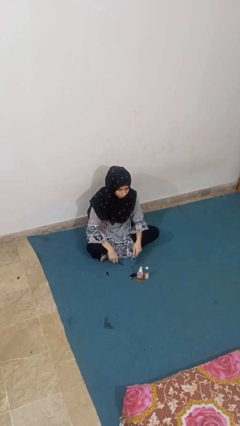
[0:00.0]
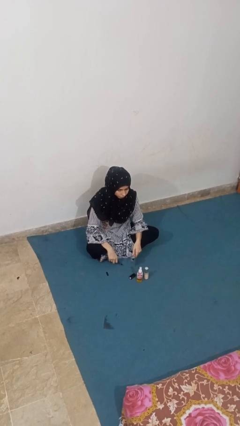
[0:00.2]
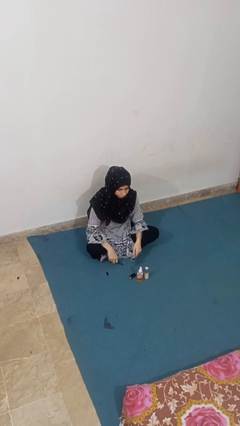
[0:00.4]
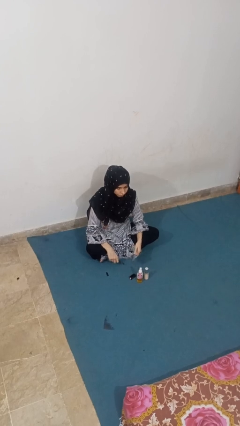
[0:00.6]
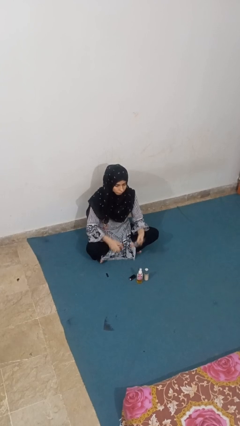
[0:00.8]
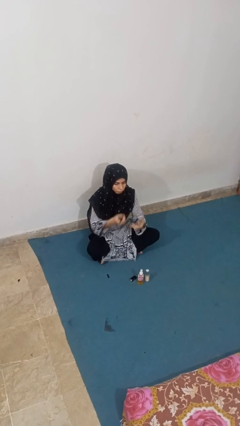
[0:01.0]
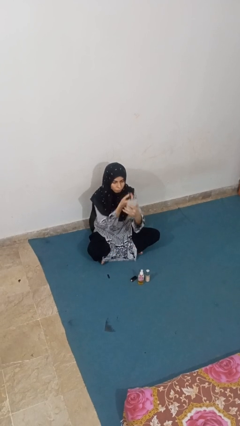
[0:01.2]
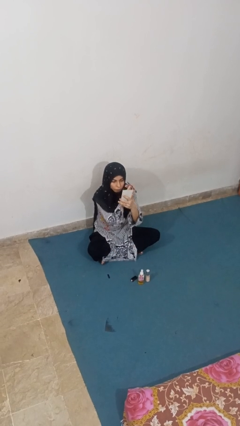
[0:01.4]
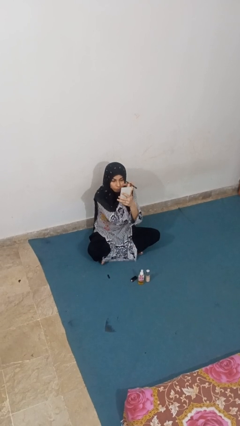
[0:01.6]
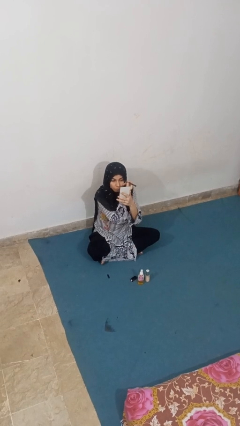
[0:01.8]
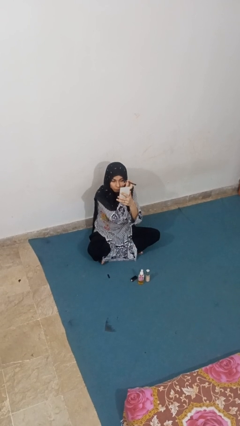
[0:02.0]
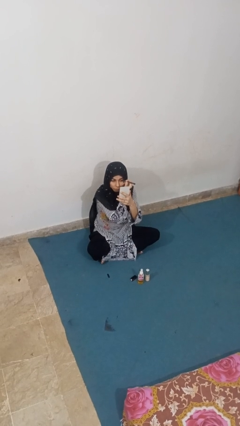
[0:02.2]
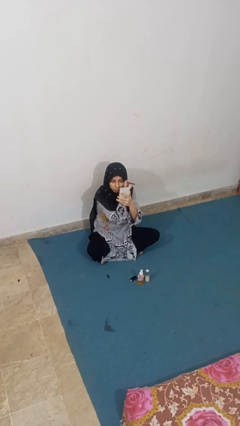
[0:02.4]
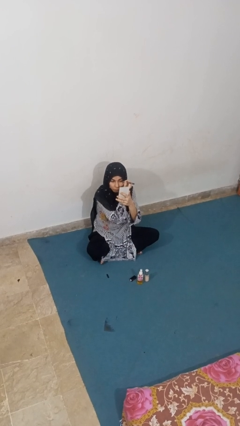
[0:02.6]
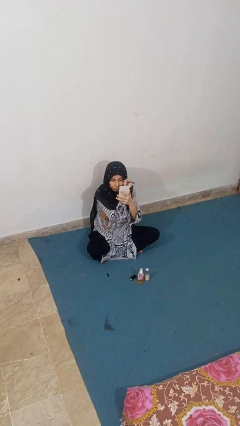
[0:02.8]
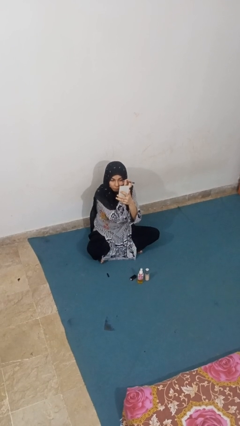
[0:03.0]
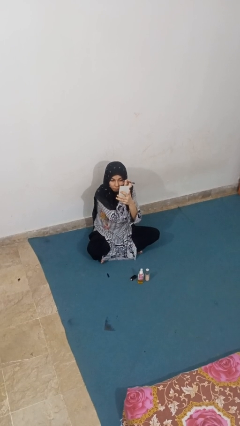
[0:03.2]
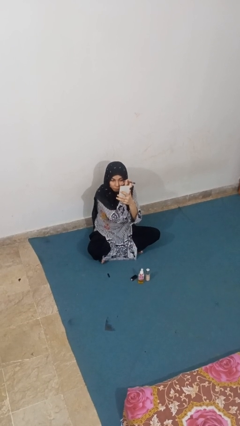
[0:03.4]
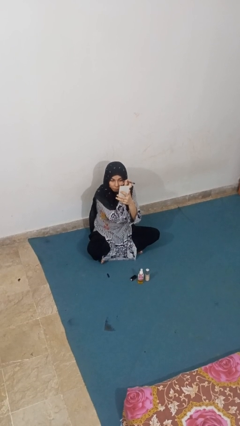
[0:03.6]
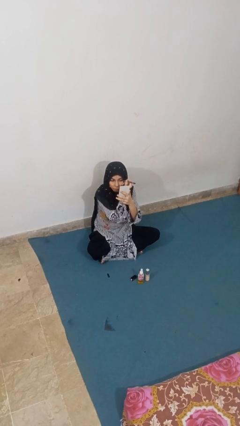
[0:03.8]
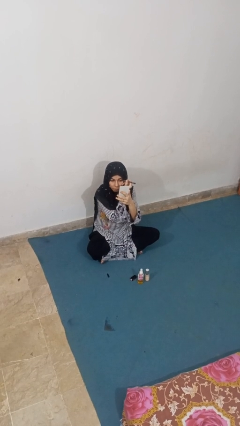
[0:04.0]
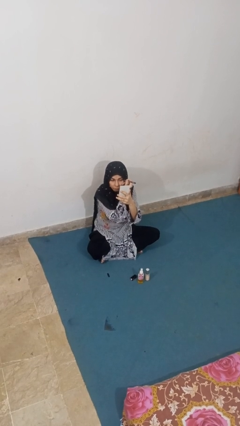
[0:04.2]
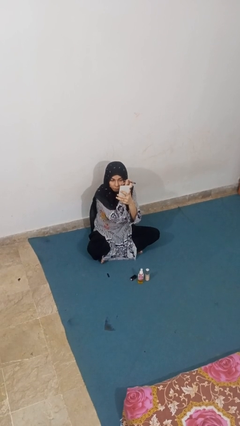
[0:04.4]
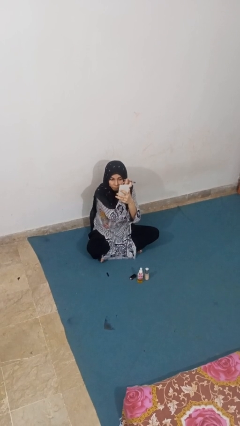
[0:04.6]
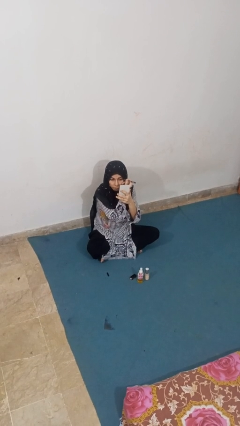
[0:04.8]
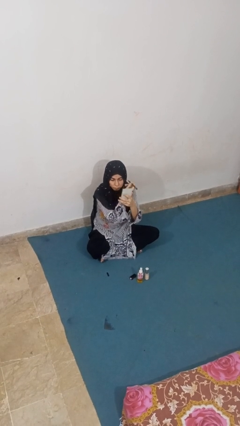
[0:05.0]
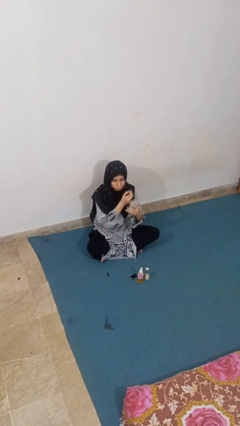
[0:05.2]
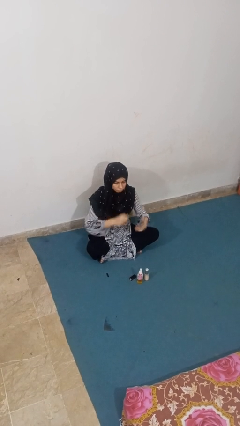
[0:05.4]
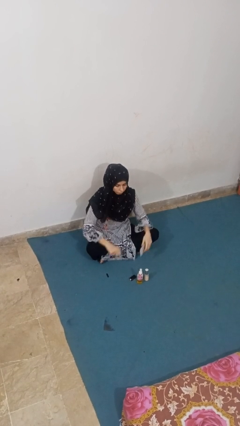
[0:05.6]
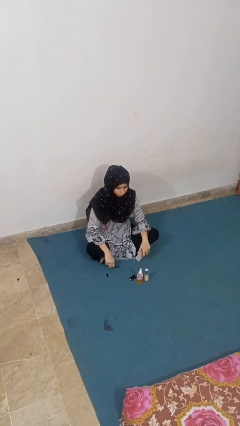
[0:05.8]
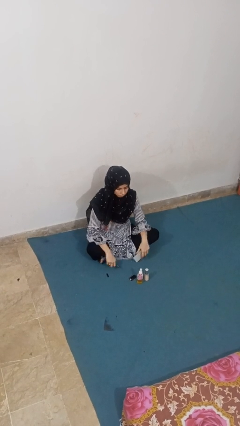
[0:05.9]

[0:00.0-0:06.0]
person applies eye makeup

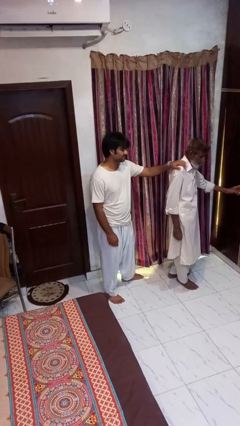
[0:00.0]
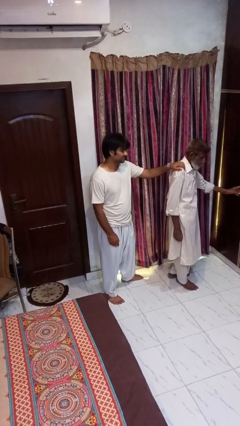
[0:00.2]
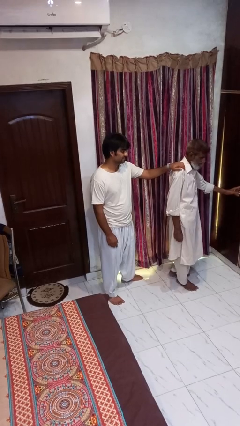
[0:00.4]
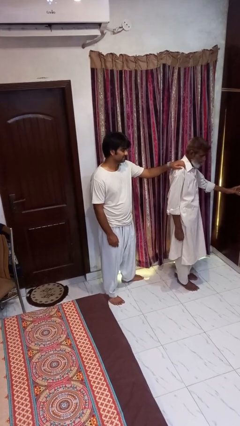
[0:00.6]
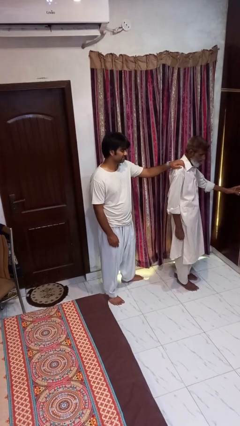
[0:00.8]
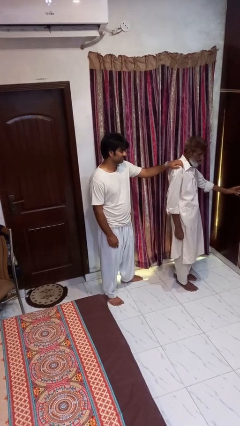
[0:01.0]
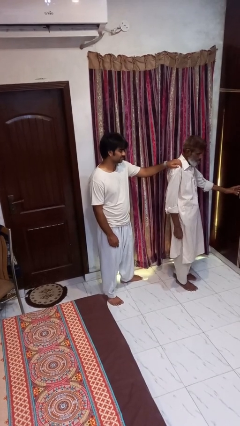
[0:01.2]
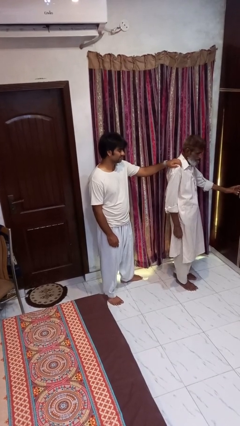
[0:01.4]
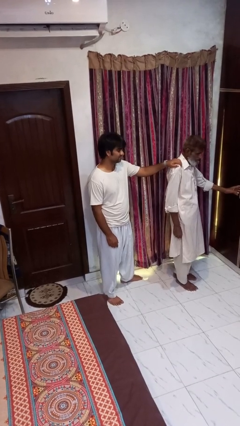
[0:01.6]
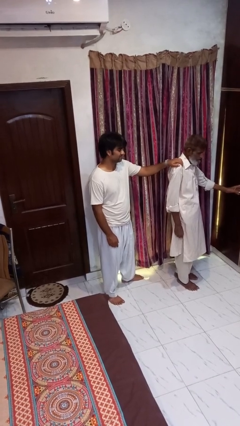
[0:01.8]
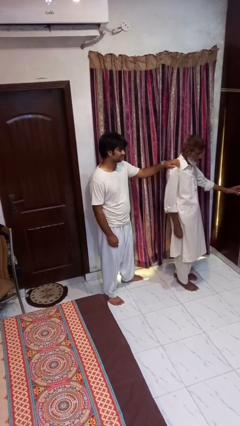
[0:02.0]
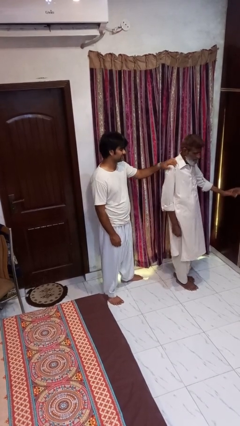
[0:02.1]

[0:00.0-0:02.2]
person grabs person by shoulder

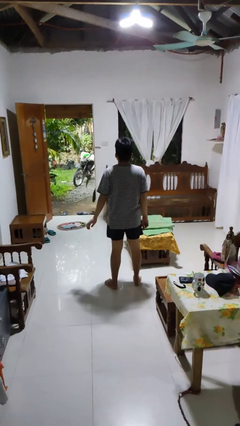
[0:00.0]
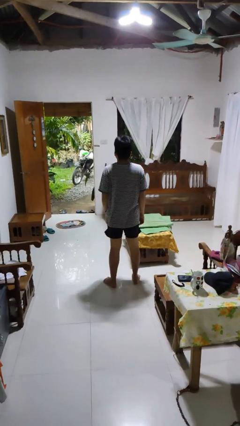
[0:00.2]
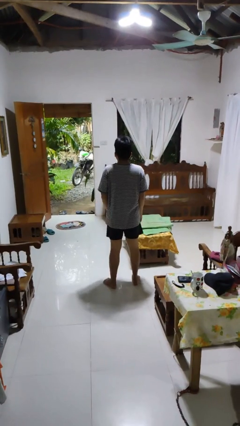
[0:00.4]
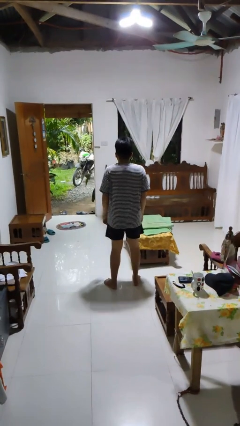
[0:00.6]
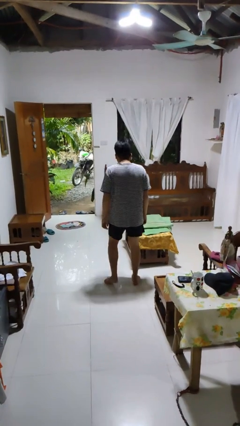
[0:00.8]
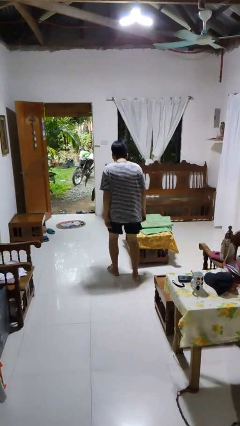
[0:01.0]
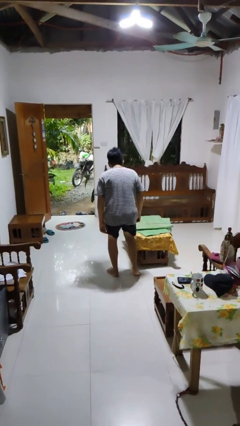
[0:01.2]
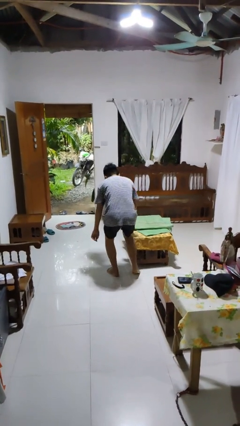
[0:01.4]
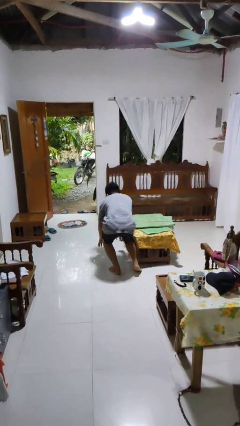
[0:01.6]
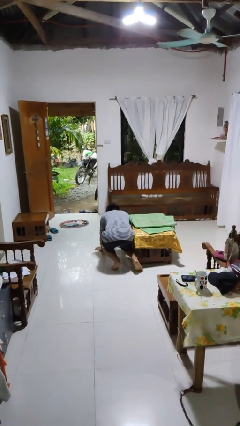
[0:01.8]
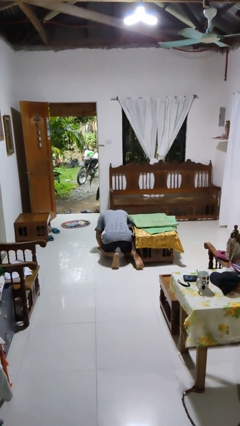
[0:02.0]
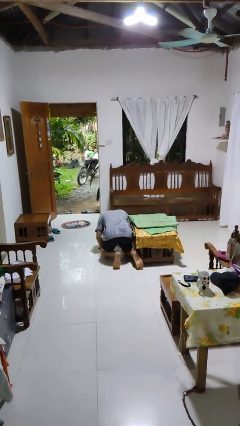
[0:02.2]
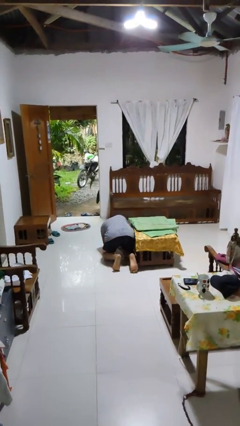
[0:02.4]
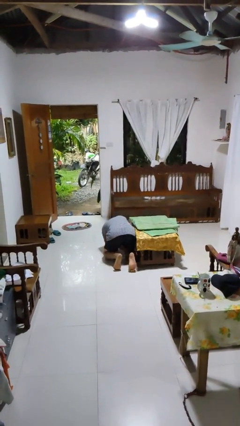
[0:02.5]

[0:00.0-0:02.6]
person trips on object on floor

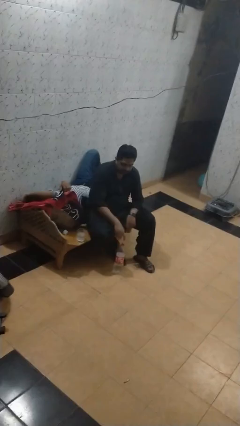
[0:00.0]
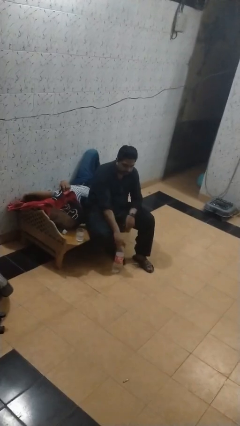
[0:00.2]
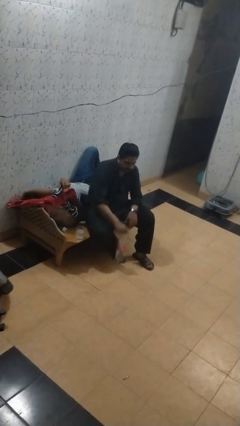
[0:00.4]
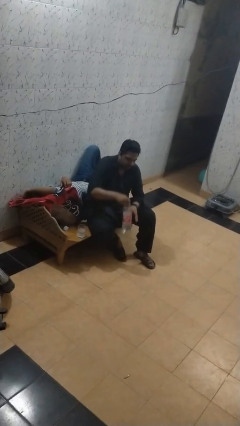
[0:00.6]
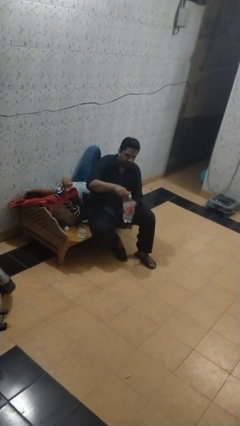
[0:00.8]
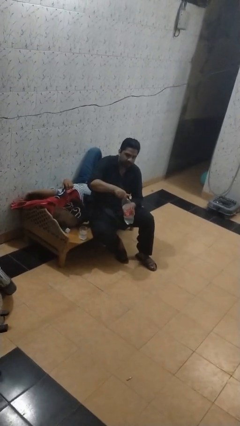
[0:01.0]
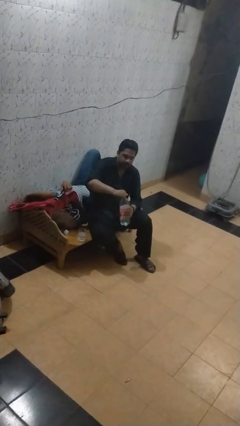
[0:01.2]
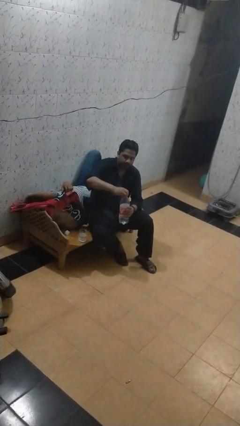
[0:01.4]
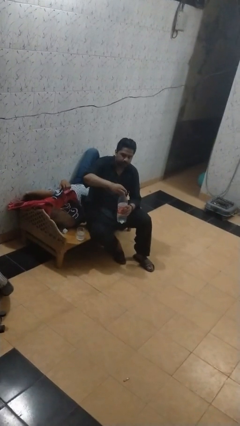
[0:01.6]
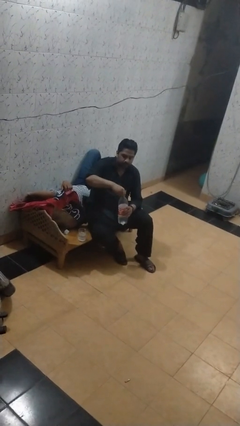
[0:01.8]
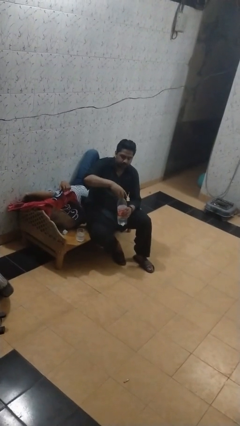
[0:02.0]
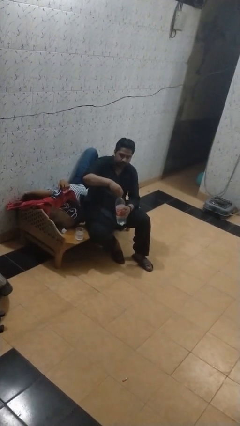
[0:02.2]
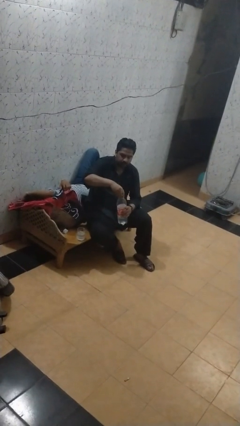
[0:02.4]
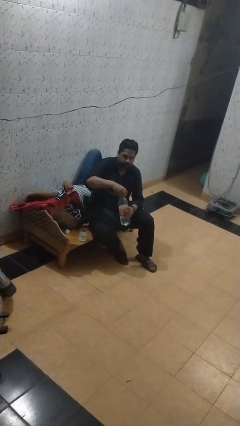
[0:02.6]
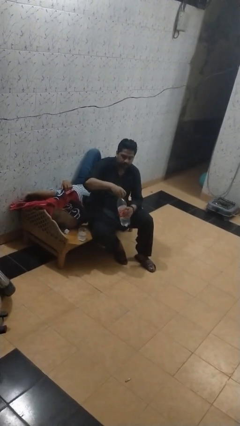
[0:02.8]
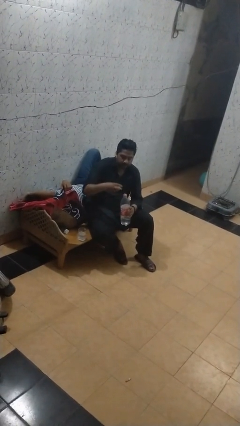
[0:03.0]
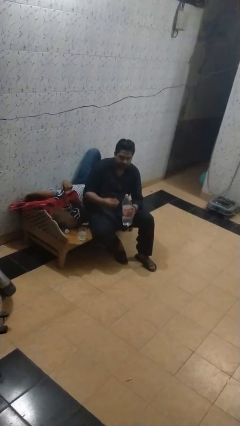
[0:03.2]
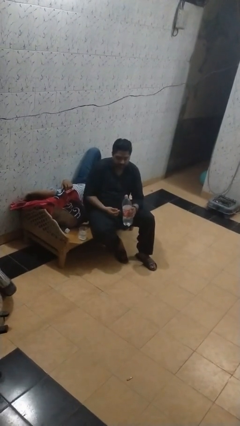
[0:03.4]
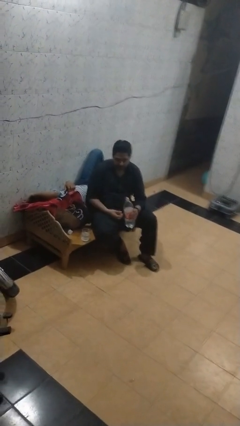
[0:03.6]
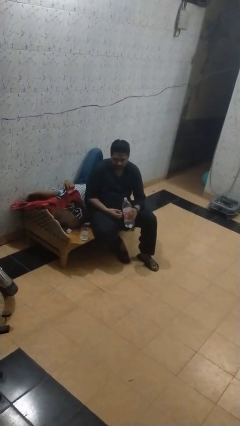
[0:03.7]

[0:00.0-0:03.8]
person unscrews lid from bottle

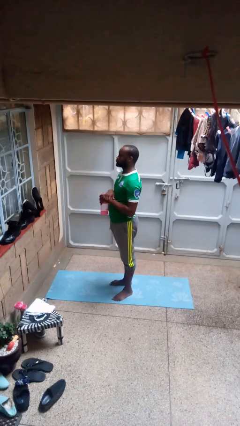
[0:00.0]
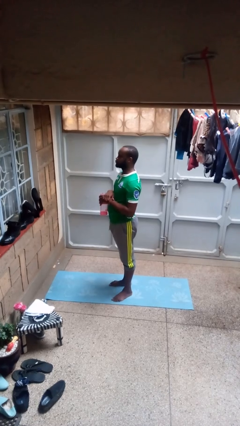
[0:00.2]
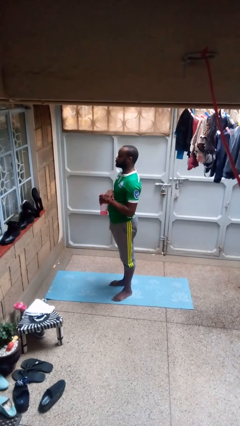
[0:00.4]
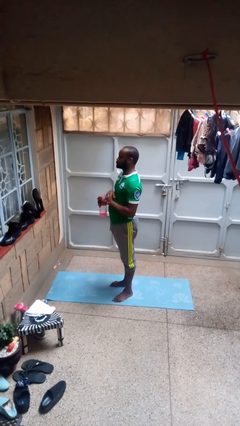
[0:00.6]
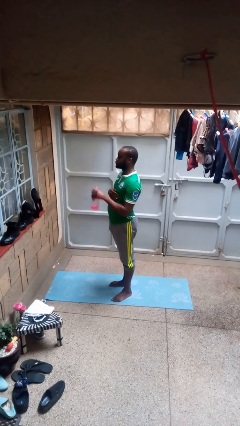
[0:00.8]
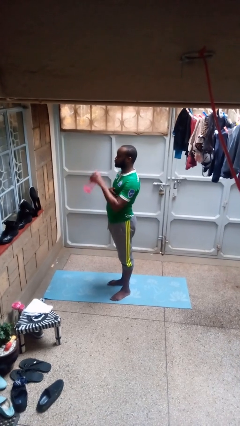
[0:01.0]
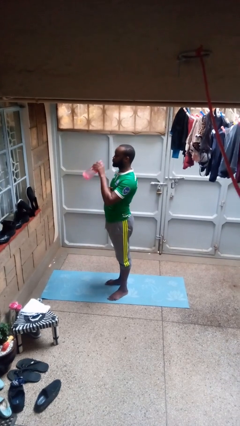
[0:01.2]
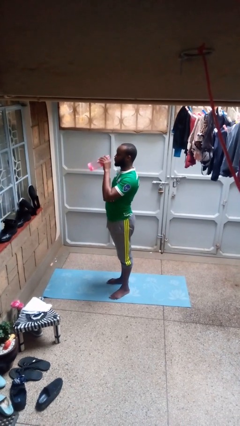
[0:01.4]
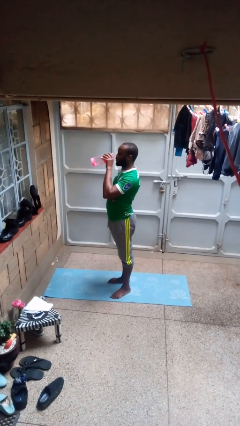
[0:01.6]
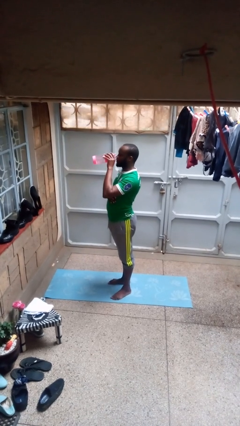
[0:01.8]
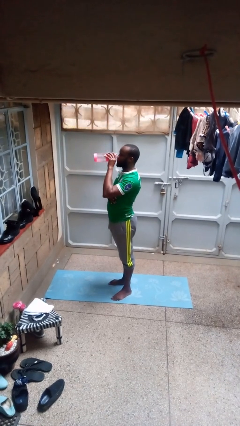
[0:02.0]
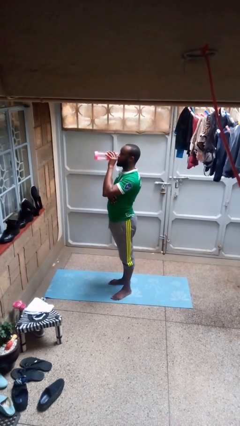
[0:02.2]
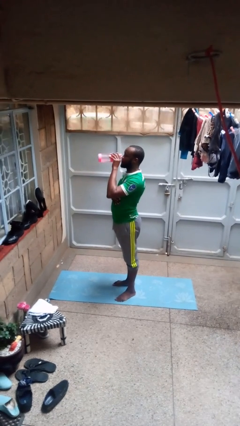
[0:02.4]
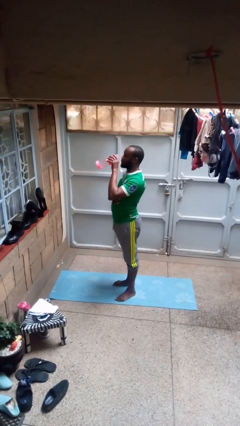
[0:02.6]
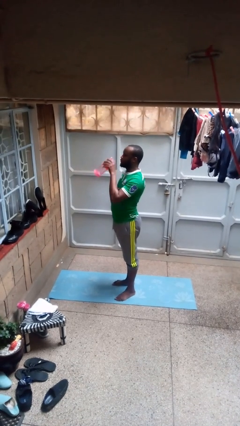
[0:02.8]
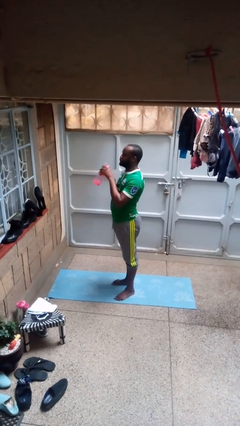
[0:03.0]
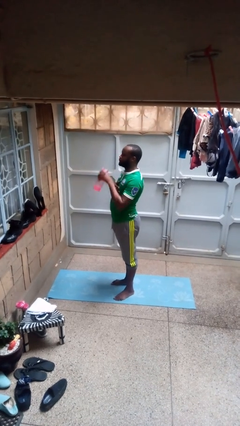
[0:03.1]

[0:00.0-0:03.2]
person drinks from bottle
